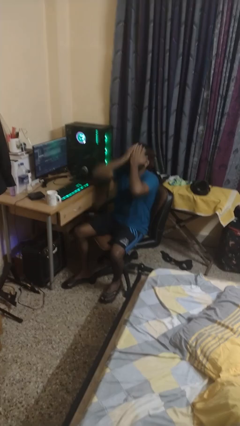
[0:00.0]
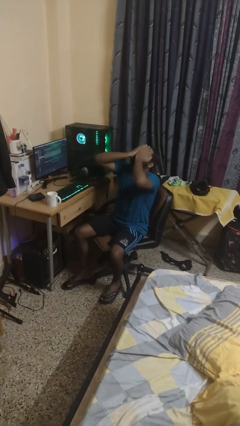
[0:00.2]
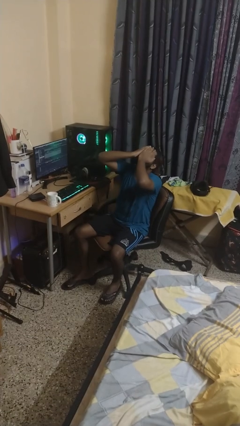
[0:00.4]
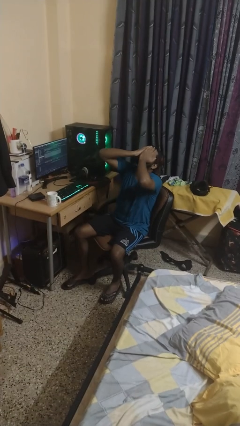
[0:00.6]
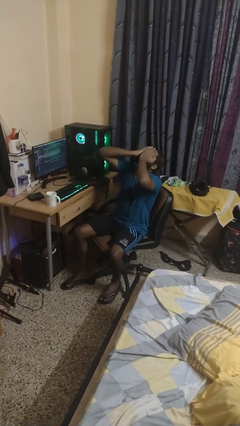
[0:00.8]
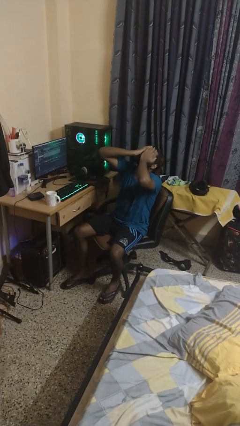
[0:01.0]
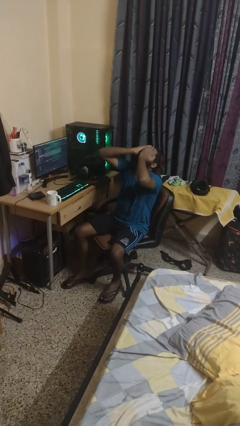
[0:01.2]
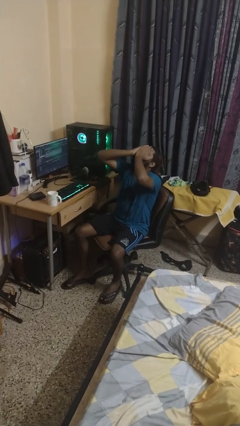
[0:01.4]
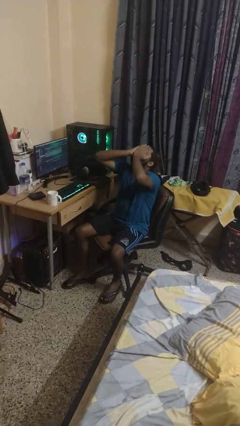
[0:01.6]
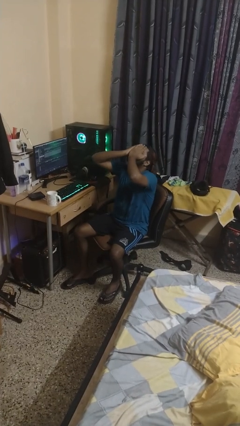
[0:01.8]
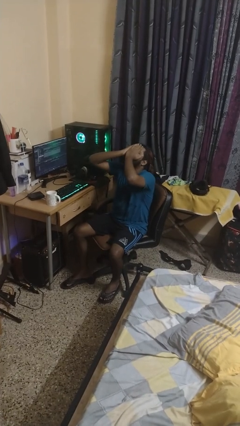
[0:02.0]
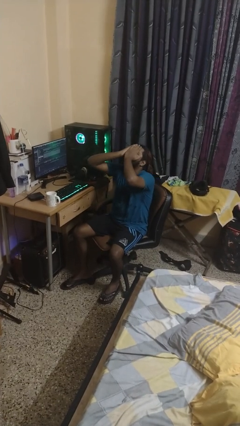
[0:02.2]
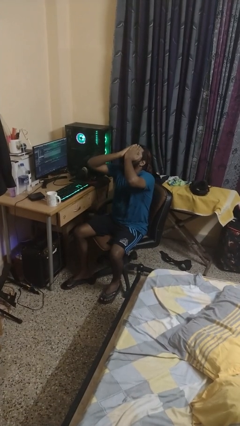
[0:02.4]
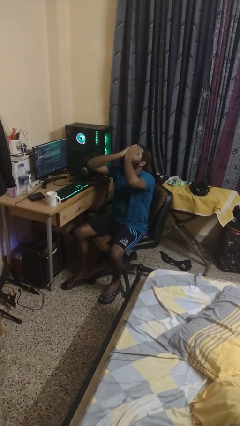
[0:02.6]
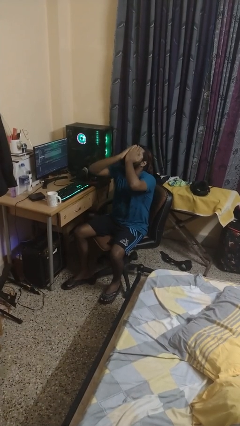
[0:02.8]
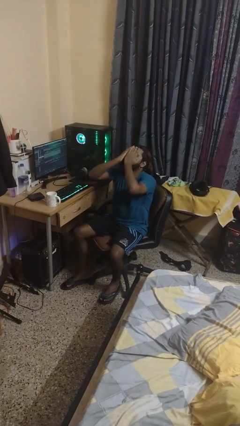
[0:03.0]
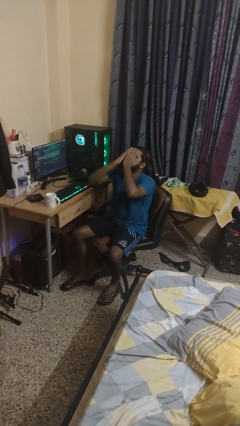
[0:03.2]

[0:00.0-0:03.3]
person covers face with hands

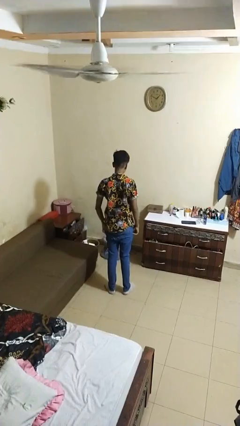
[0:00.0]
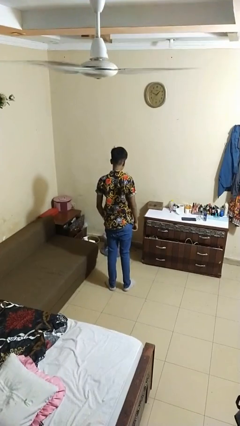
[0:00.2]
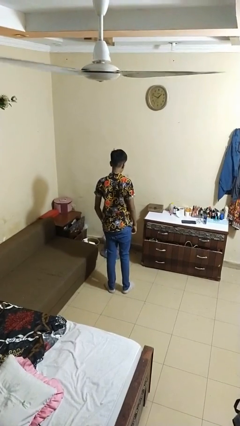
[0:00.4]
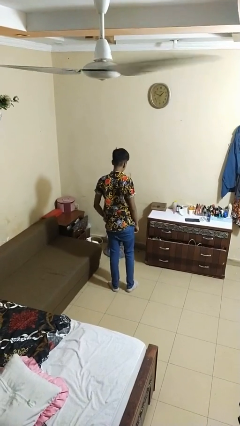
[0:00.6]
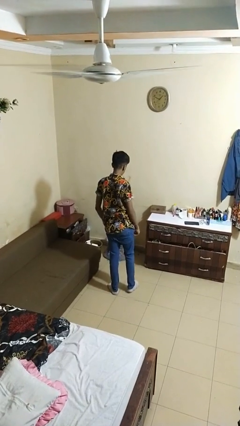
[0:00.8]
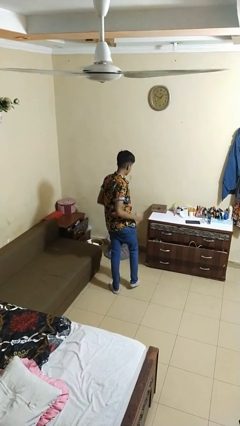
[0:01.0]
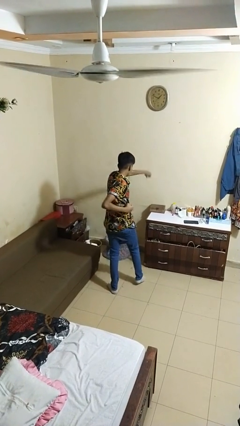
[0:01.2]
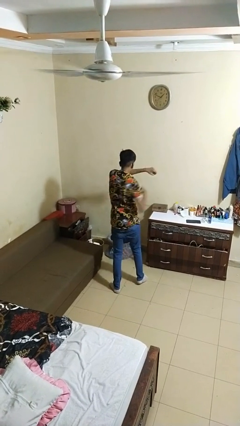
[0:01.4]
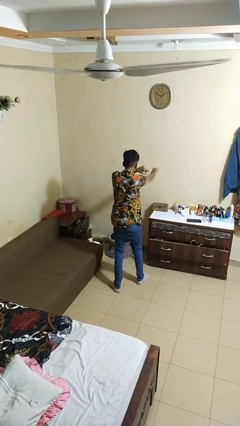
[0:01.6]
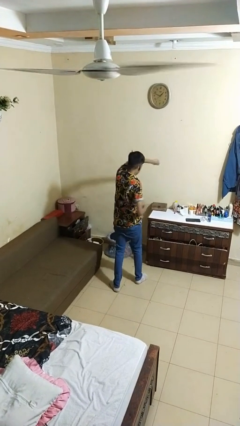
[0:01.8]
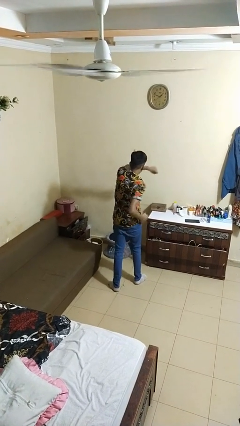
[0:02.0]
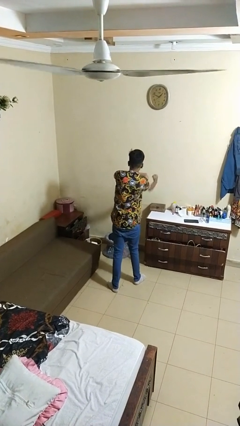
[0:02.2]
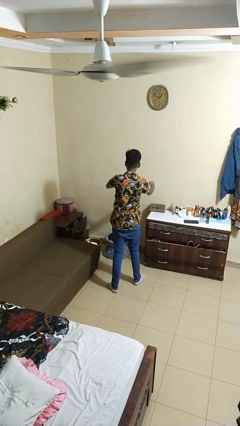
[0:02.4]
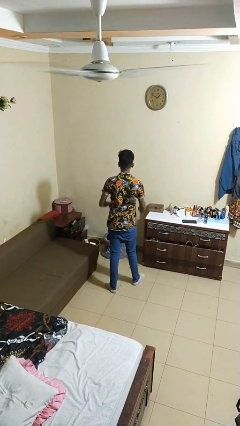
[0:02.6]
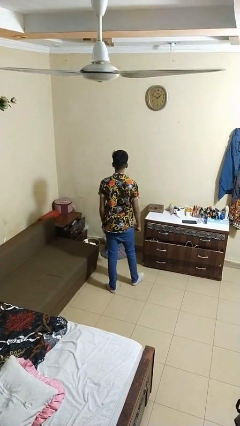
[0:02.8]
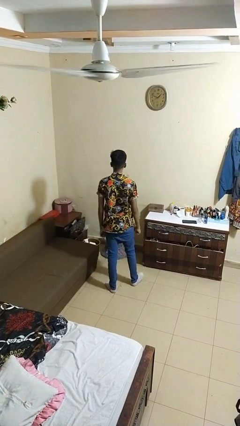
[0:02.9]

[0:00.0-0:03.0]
person punches

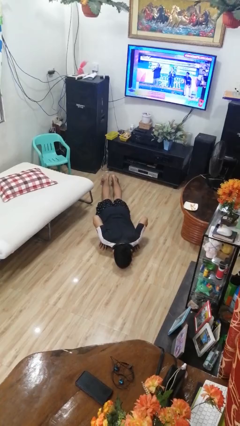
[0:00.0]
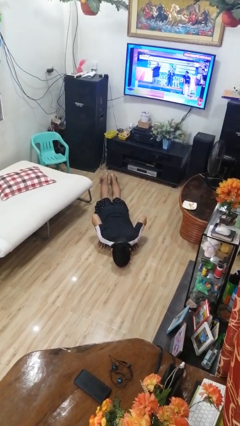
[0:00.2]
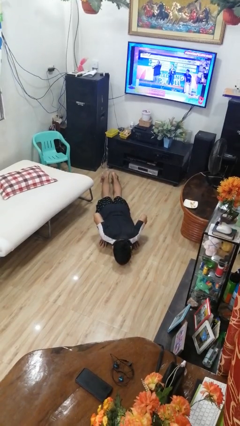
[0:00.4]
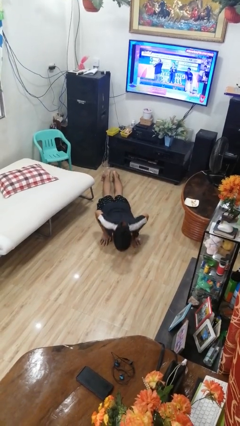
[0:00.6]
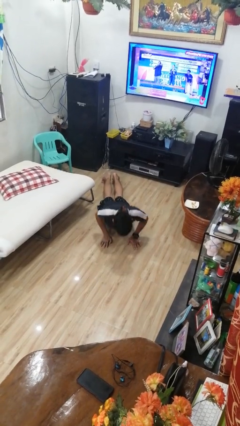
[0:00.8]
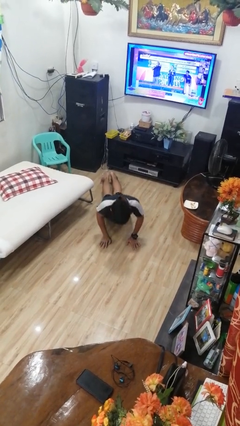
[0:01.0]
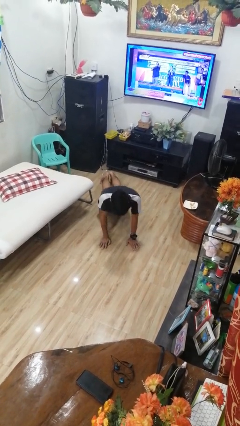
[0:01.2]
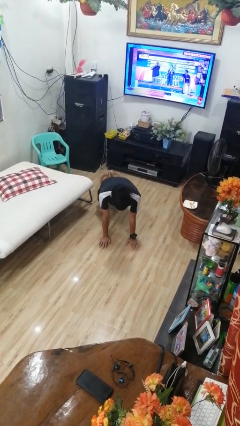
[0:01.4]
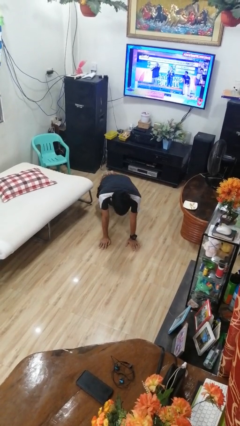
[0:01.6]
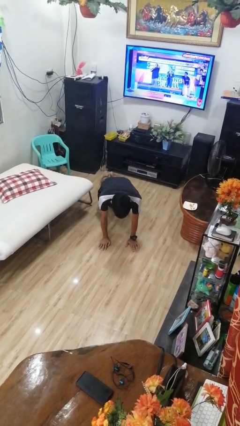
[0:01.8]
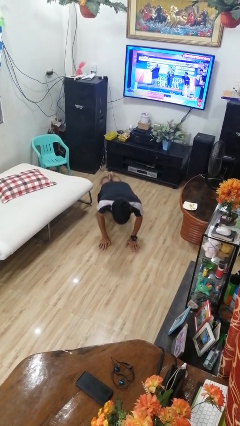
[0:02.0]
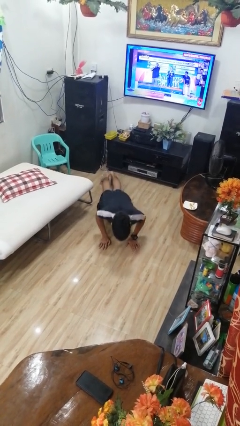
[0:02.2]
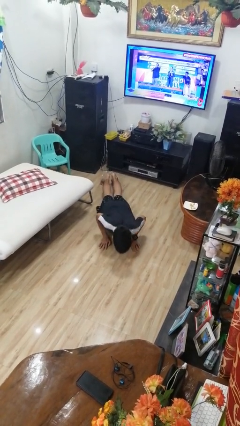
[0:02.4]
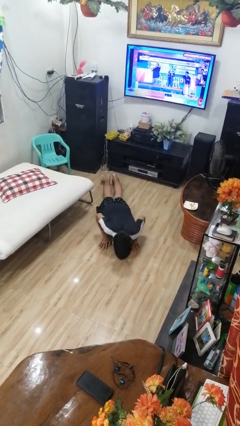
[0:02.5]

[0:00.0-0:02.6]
person exercises with pushup

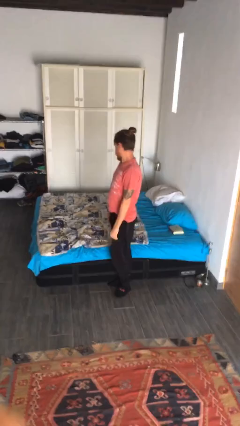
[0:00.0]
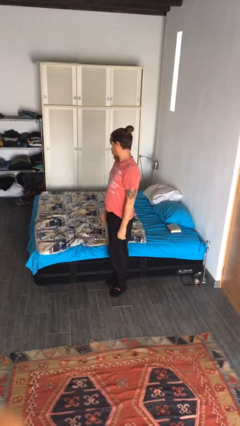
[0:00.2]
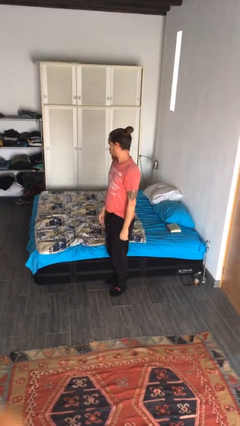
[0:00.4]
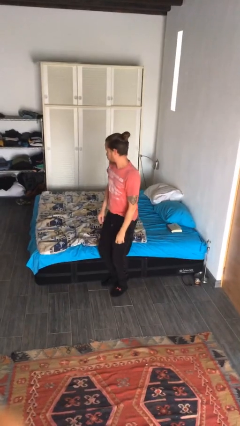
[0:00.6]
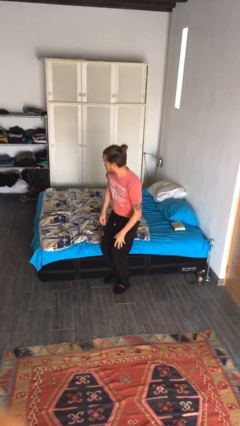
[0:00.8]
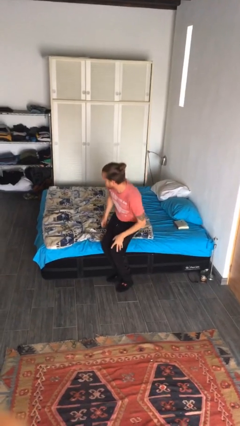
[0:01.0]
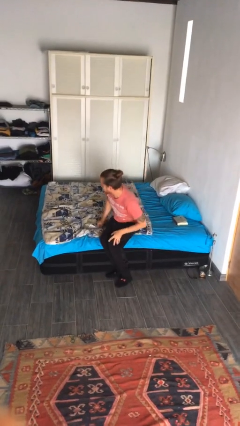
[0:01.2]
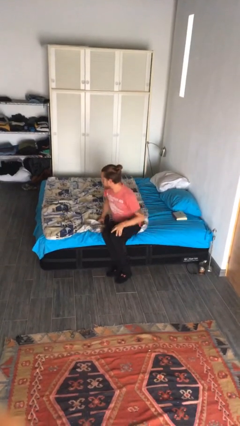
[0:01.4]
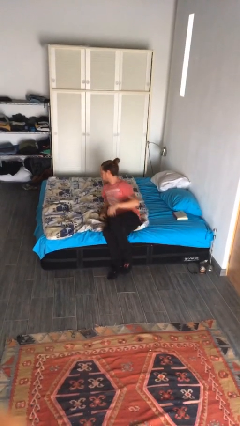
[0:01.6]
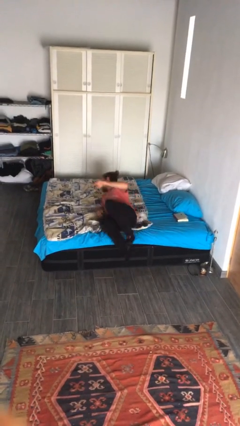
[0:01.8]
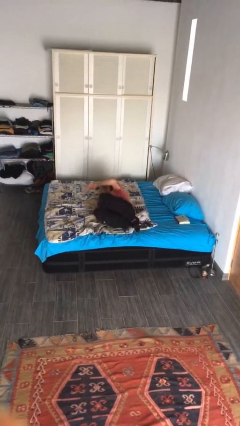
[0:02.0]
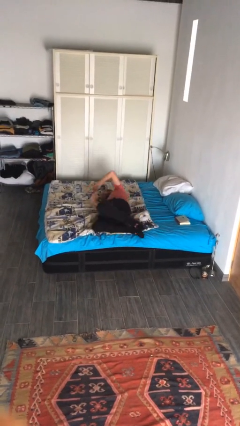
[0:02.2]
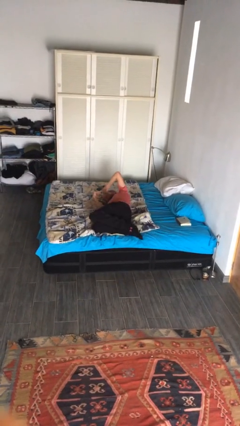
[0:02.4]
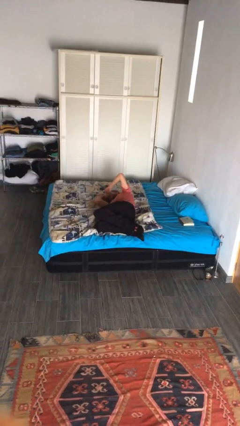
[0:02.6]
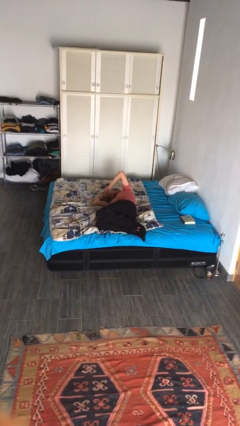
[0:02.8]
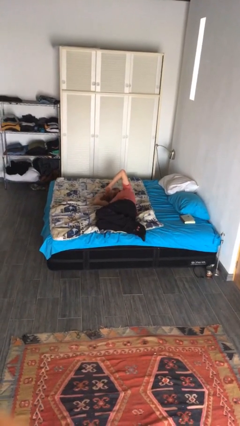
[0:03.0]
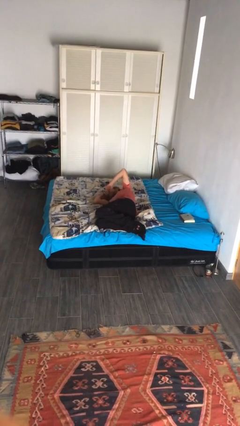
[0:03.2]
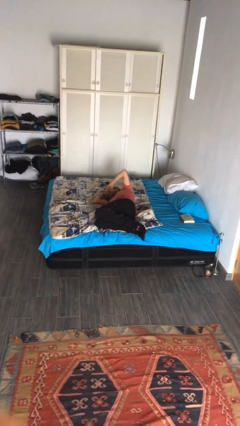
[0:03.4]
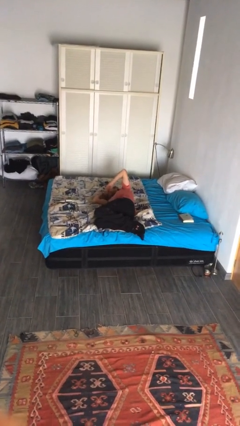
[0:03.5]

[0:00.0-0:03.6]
person lies down on bed

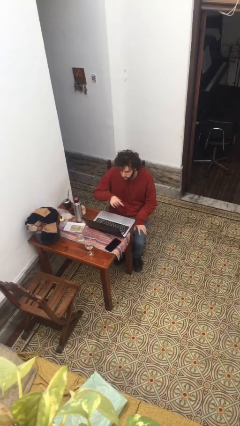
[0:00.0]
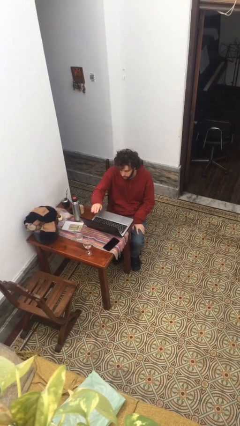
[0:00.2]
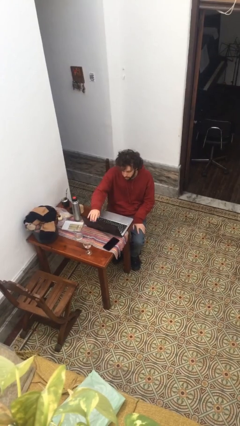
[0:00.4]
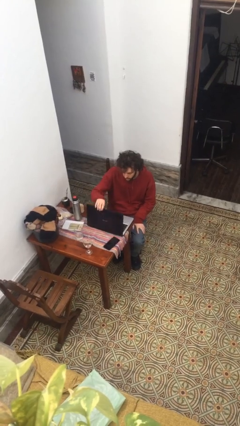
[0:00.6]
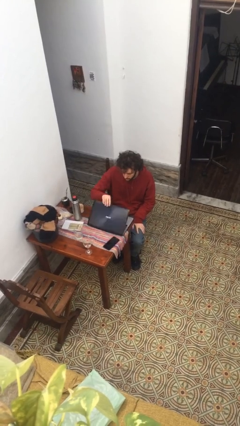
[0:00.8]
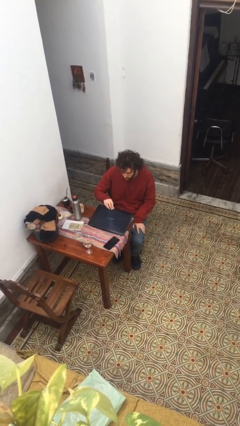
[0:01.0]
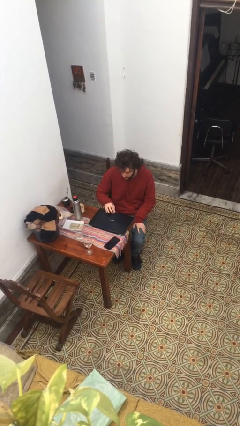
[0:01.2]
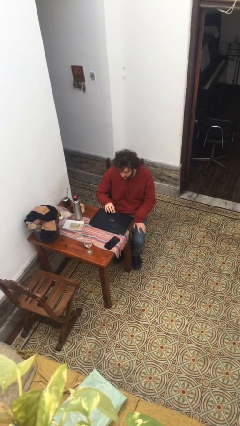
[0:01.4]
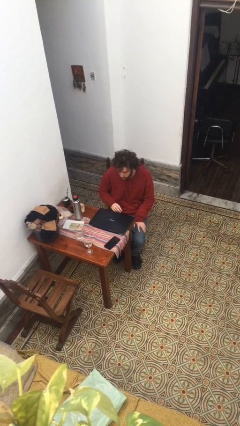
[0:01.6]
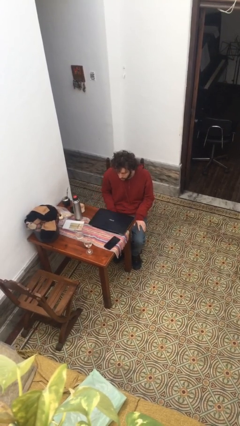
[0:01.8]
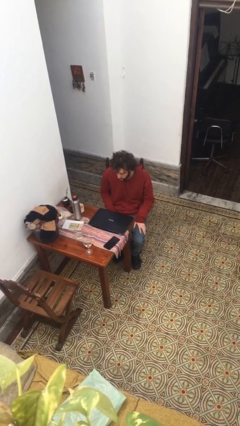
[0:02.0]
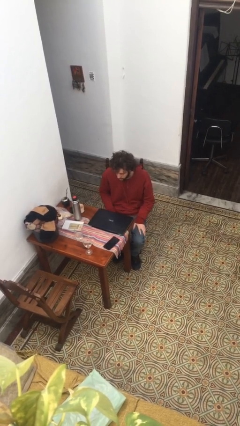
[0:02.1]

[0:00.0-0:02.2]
person closes laptop

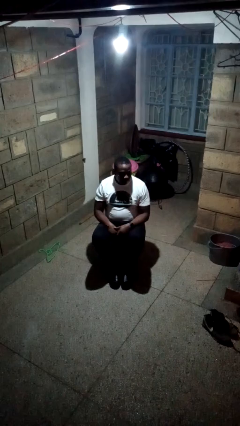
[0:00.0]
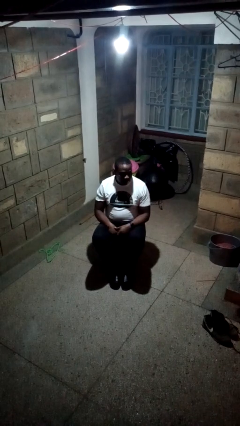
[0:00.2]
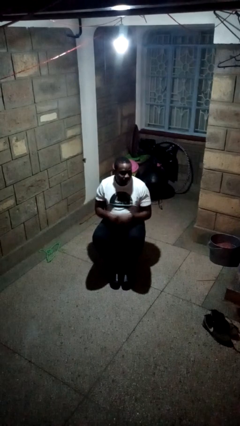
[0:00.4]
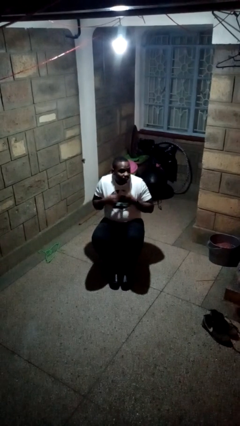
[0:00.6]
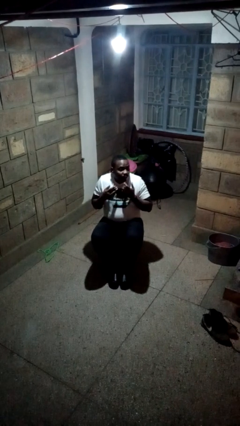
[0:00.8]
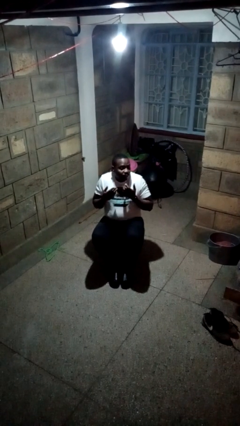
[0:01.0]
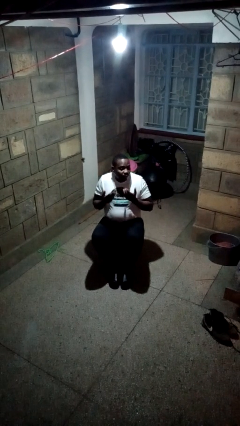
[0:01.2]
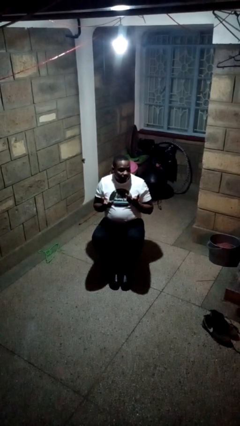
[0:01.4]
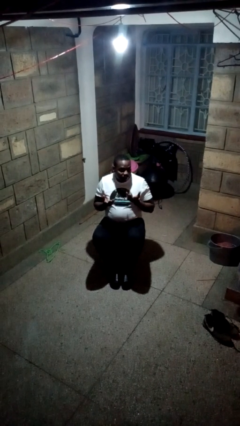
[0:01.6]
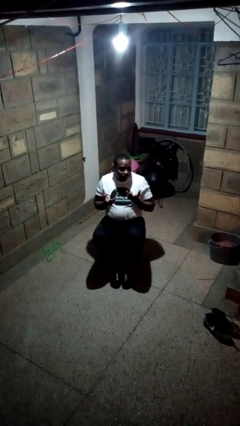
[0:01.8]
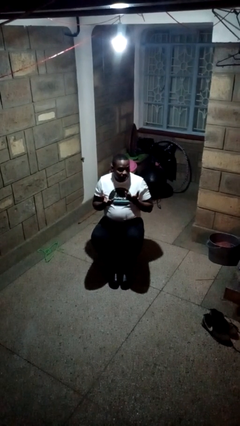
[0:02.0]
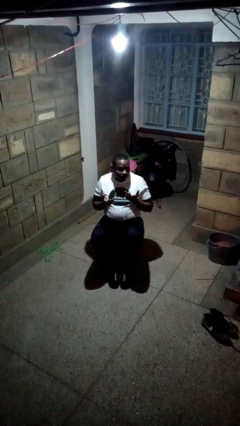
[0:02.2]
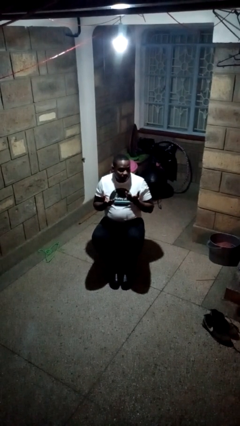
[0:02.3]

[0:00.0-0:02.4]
person shrugs

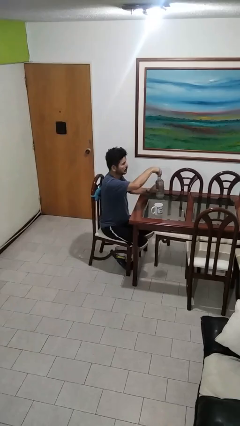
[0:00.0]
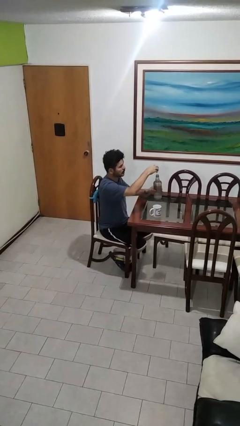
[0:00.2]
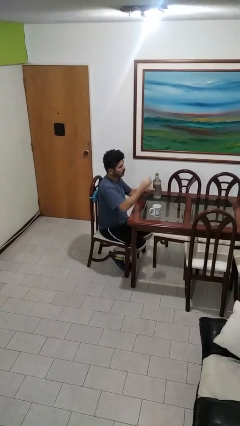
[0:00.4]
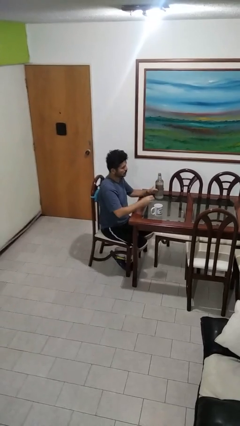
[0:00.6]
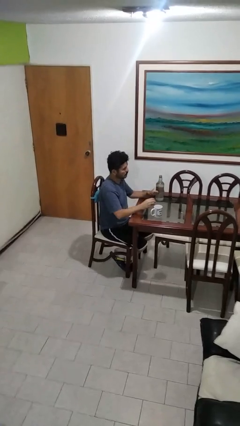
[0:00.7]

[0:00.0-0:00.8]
person unscrews lid from bottle
